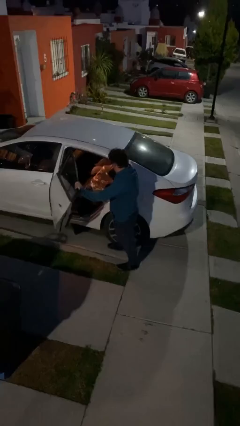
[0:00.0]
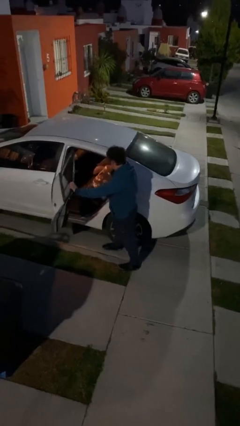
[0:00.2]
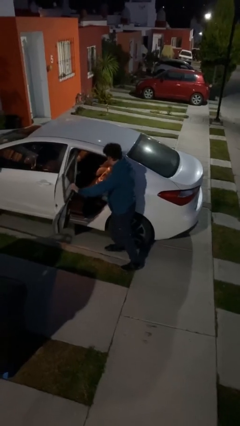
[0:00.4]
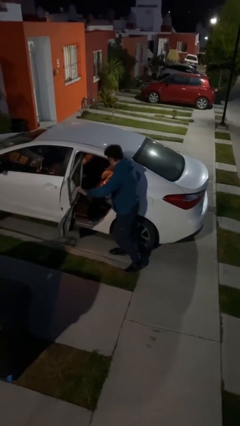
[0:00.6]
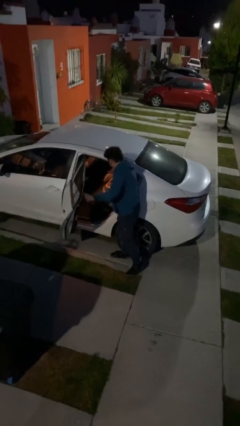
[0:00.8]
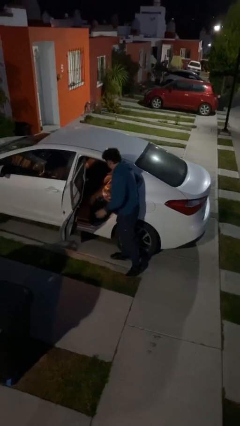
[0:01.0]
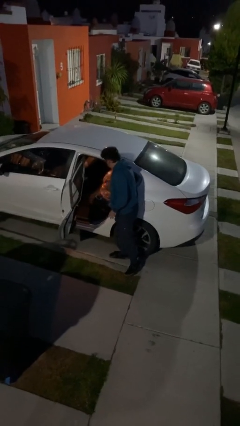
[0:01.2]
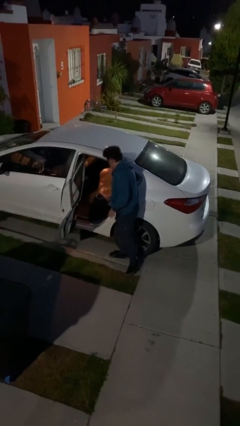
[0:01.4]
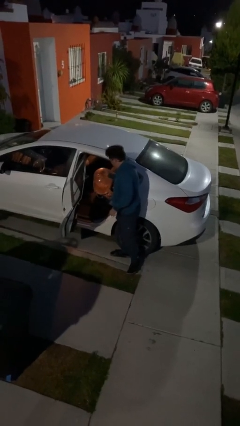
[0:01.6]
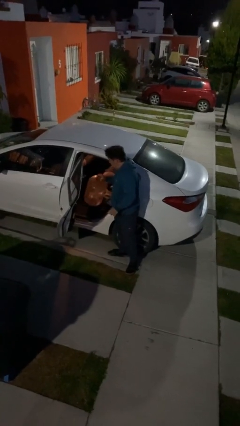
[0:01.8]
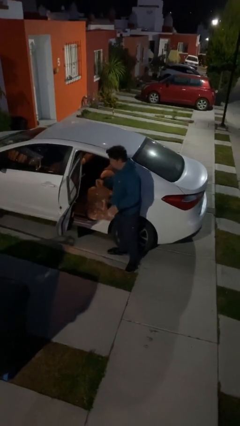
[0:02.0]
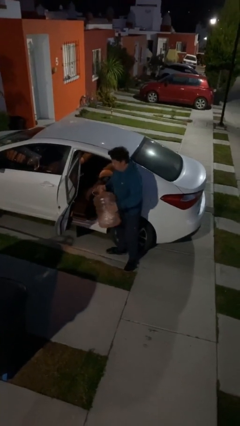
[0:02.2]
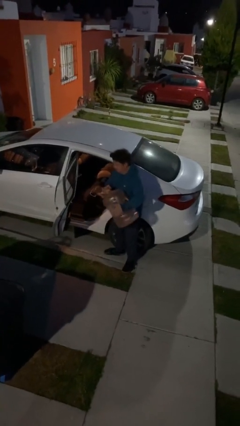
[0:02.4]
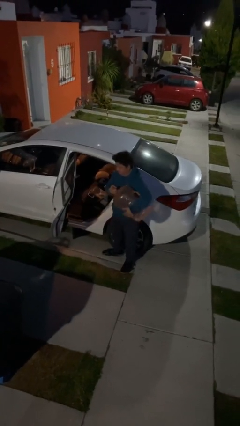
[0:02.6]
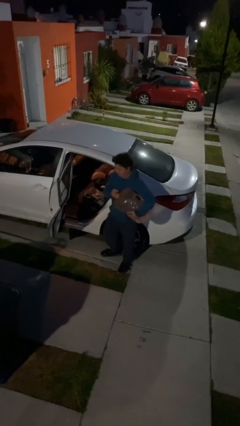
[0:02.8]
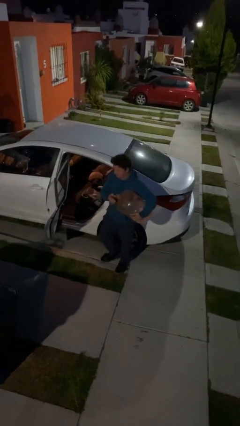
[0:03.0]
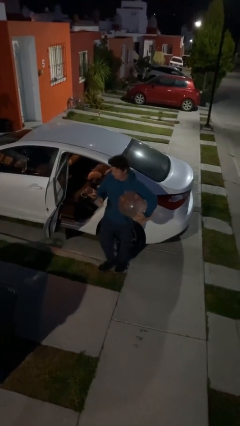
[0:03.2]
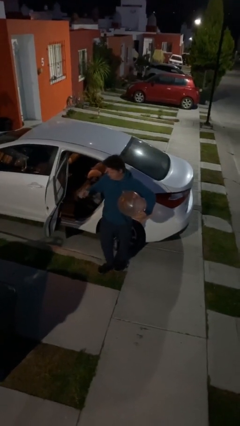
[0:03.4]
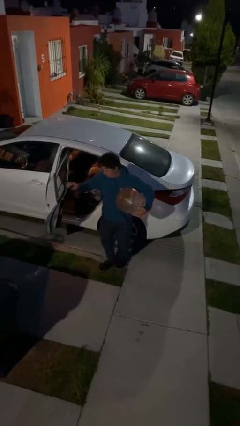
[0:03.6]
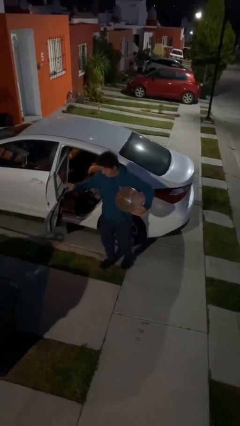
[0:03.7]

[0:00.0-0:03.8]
person unloads car

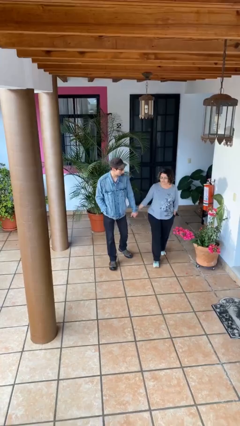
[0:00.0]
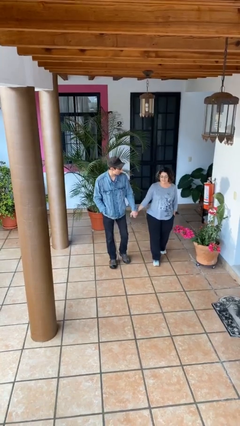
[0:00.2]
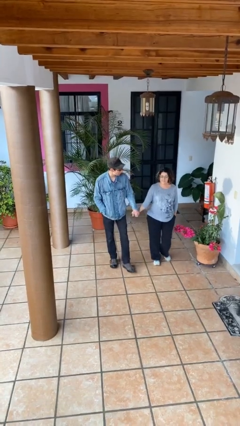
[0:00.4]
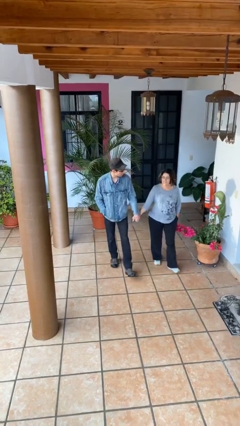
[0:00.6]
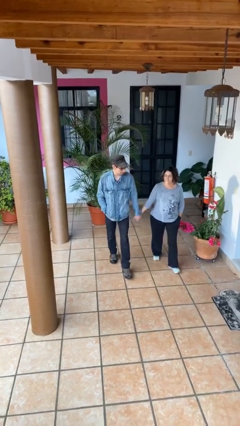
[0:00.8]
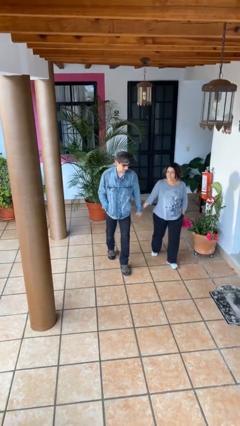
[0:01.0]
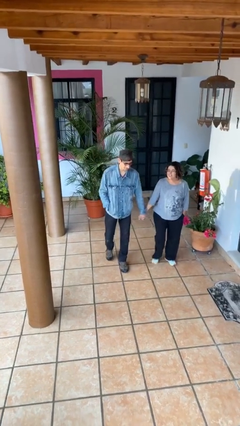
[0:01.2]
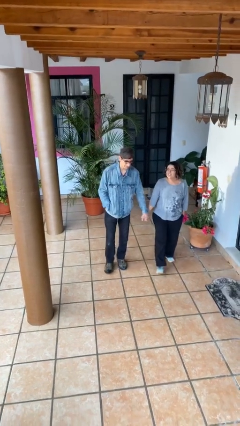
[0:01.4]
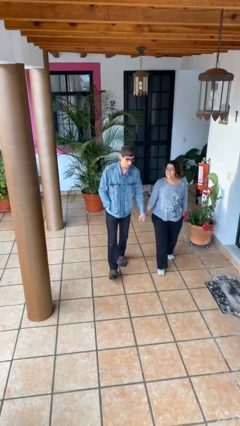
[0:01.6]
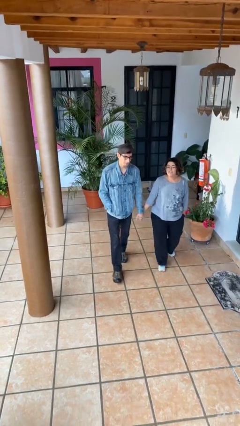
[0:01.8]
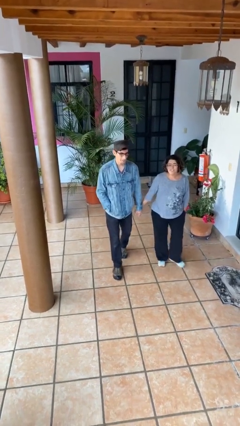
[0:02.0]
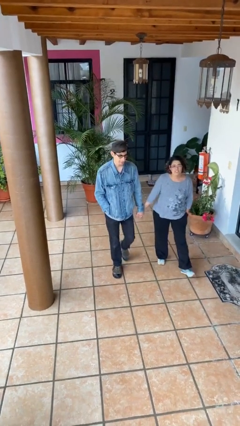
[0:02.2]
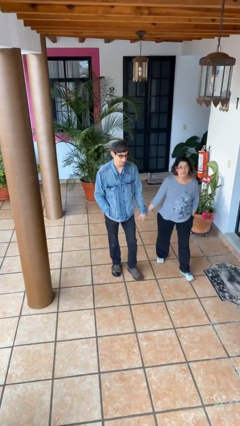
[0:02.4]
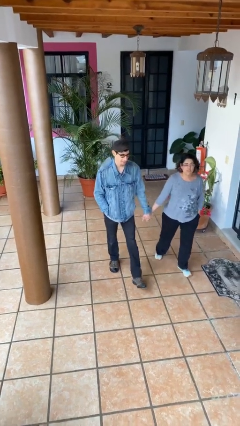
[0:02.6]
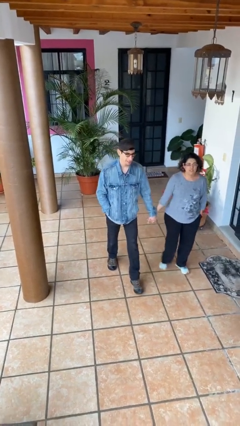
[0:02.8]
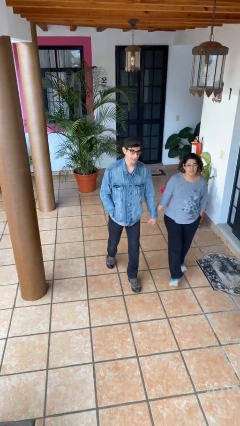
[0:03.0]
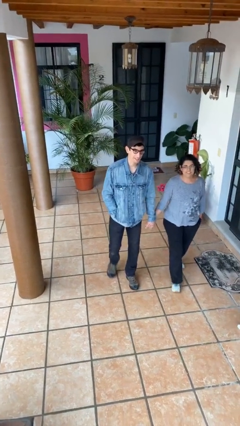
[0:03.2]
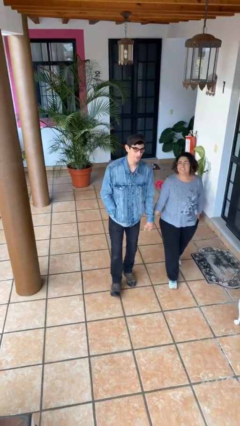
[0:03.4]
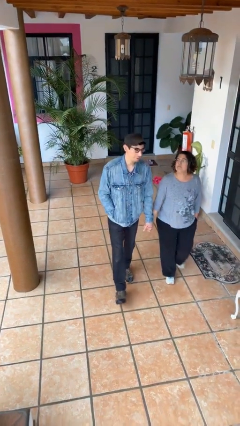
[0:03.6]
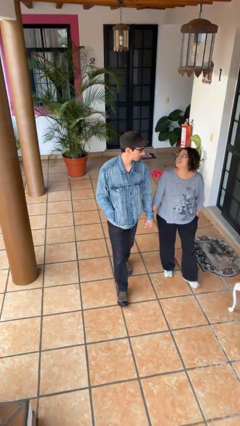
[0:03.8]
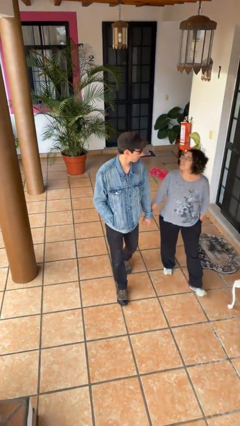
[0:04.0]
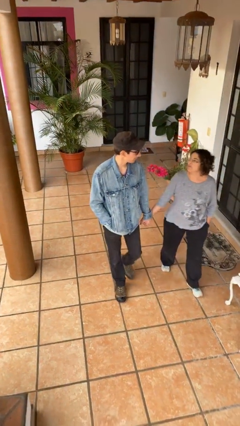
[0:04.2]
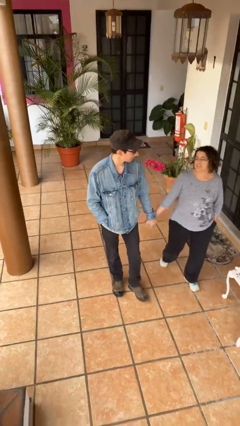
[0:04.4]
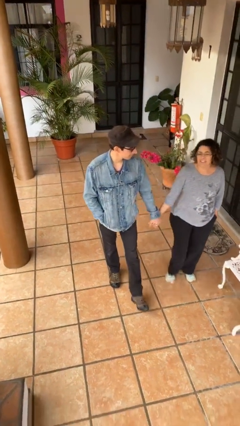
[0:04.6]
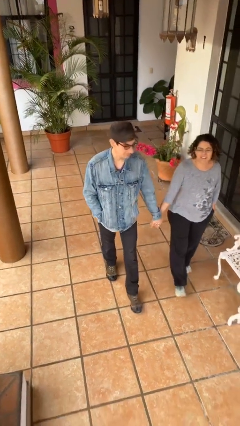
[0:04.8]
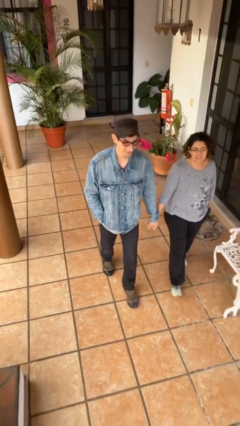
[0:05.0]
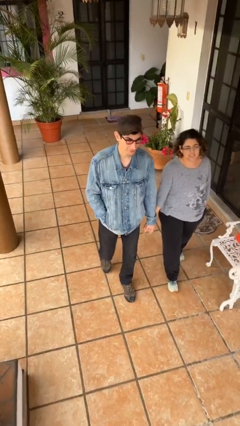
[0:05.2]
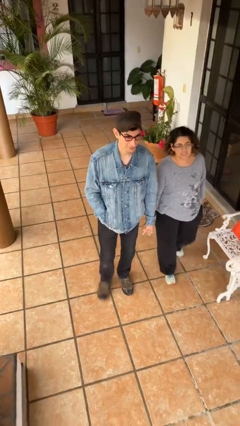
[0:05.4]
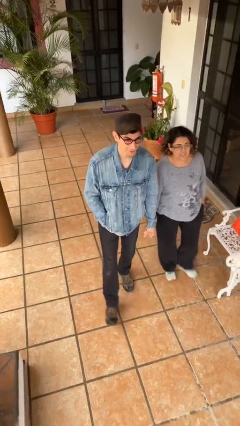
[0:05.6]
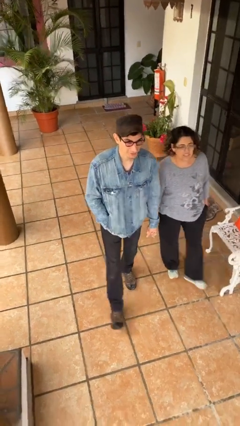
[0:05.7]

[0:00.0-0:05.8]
person holds hand

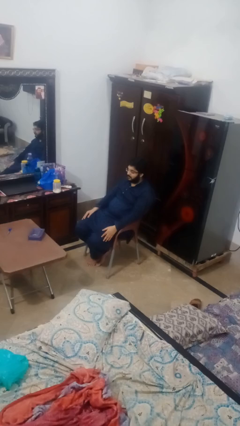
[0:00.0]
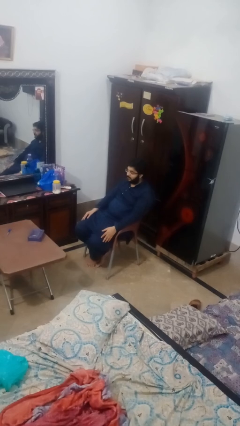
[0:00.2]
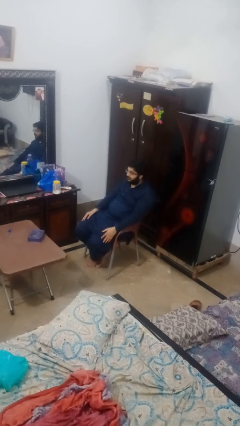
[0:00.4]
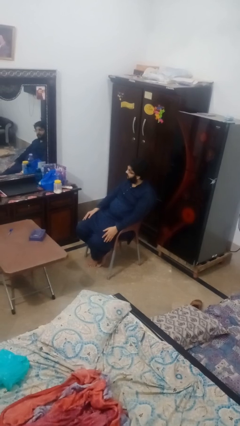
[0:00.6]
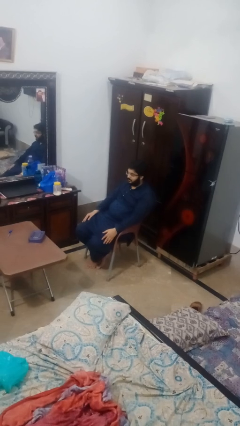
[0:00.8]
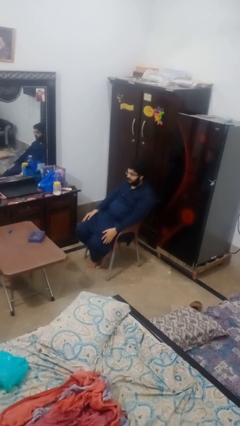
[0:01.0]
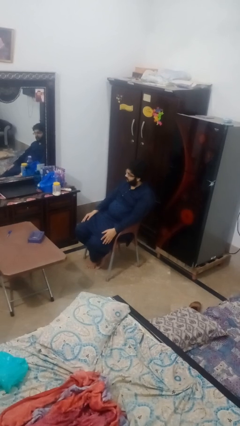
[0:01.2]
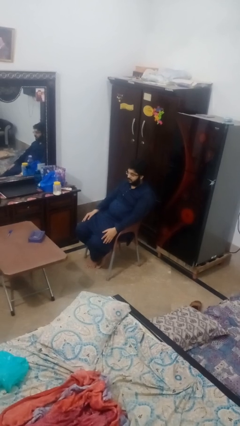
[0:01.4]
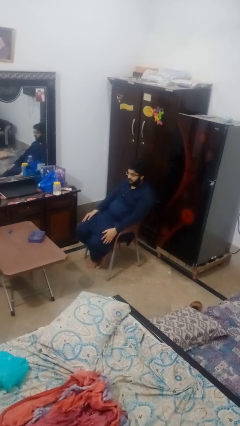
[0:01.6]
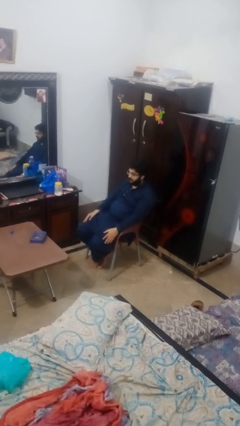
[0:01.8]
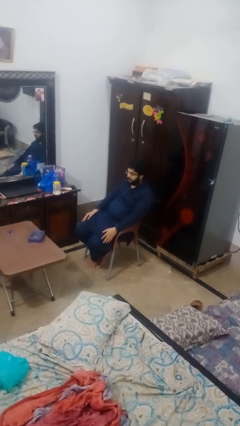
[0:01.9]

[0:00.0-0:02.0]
person shakes head

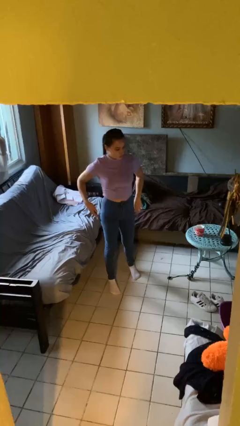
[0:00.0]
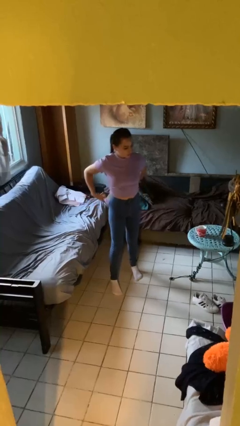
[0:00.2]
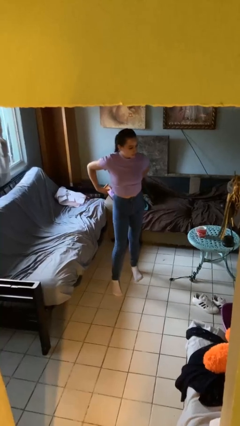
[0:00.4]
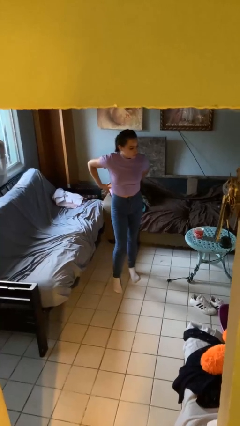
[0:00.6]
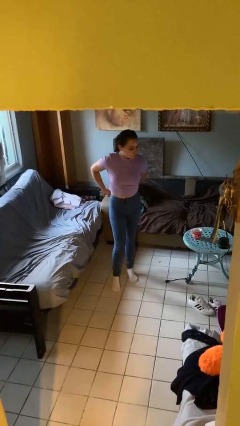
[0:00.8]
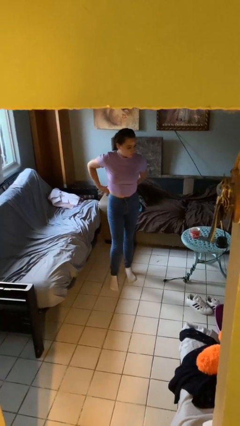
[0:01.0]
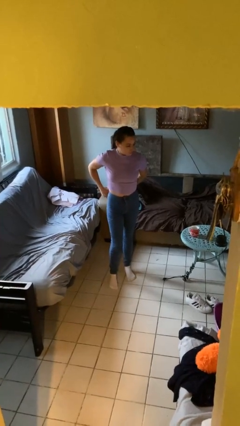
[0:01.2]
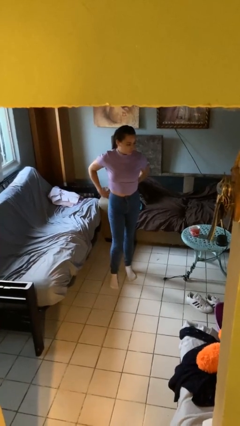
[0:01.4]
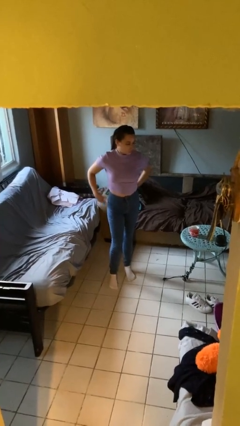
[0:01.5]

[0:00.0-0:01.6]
person puts phone into pocket

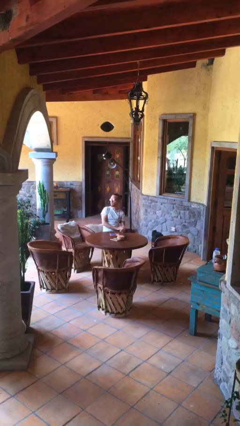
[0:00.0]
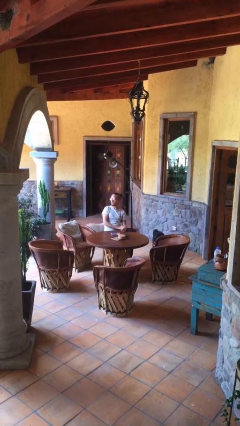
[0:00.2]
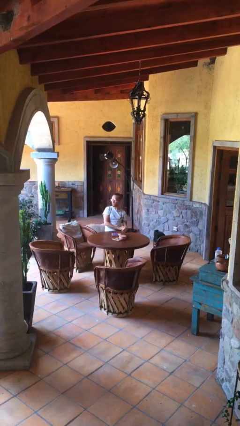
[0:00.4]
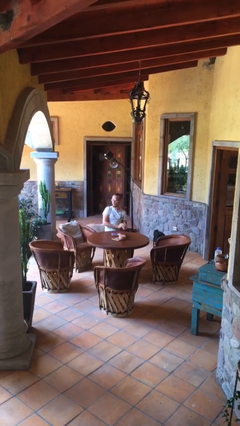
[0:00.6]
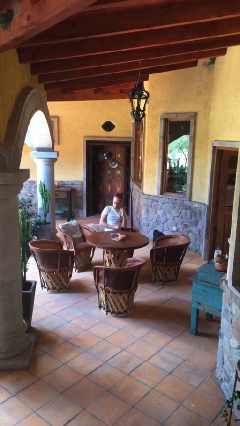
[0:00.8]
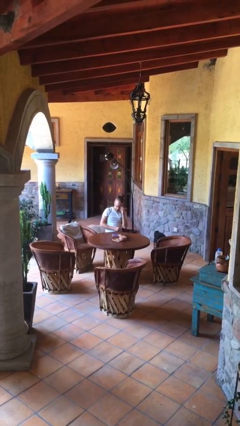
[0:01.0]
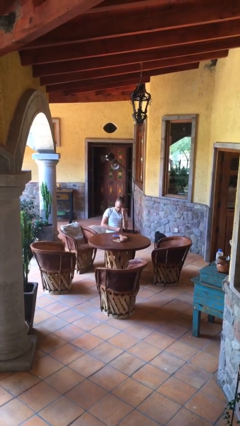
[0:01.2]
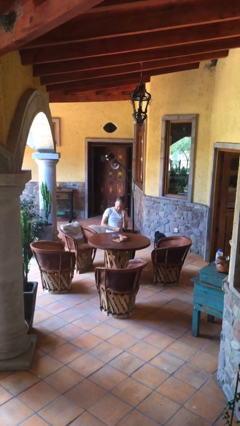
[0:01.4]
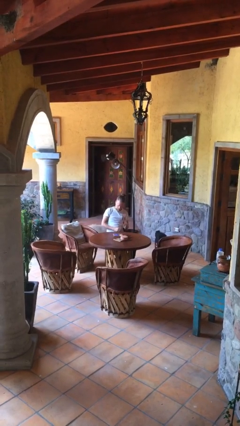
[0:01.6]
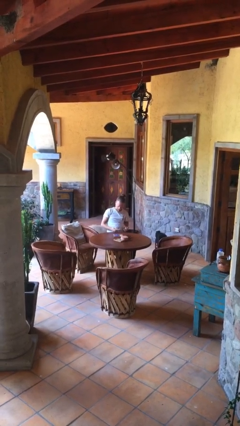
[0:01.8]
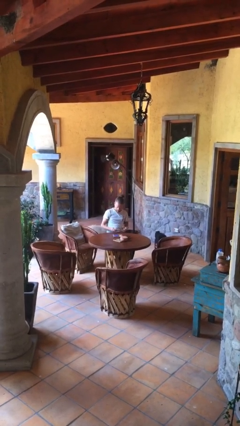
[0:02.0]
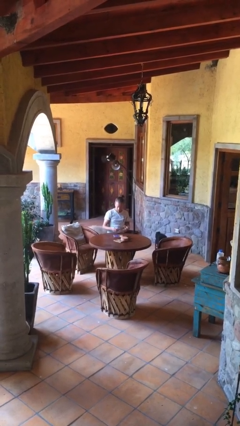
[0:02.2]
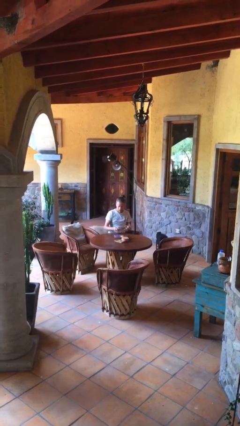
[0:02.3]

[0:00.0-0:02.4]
person takes off glasses

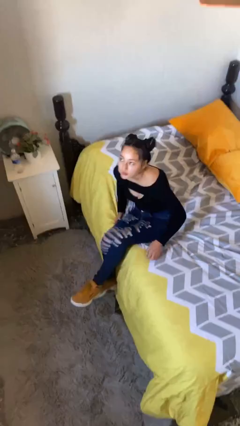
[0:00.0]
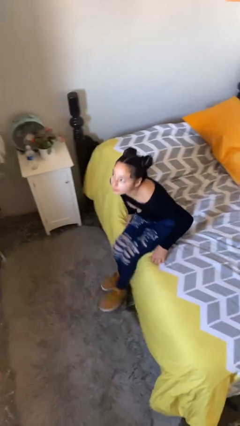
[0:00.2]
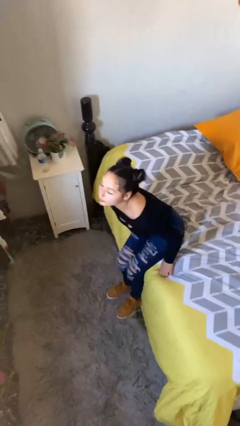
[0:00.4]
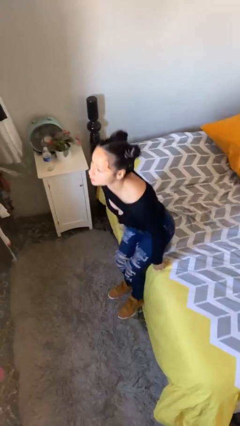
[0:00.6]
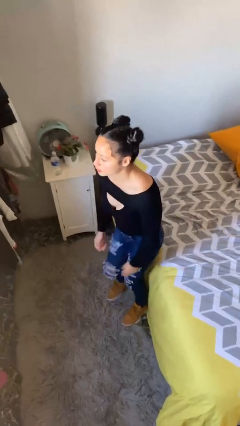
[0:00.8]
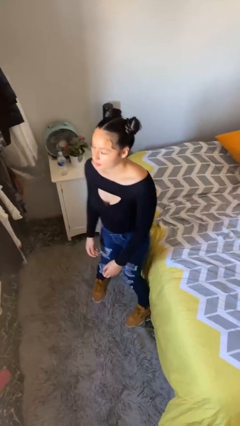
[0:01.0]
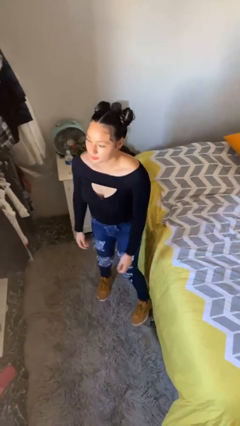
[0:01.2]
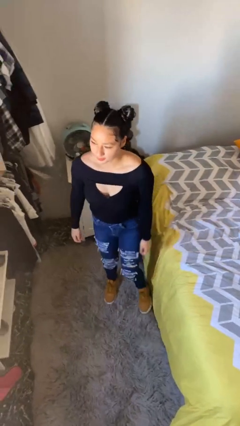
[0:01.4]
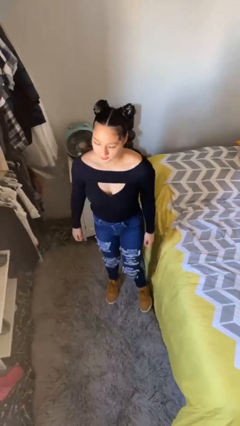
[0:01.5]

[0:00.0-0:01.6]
person stands up
